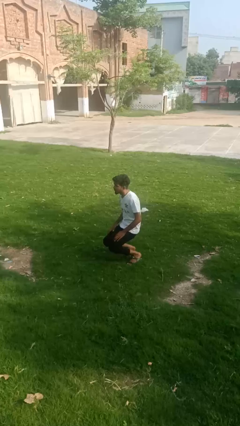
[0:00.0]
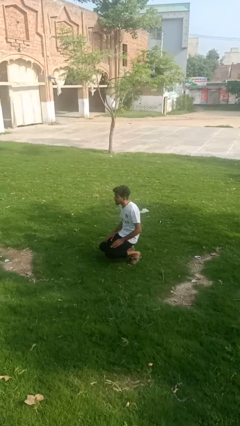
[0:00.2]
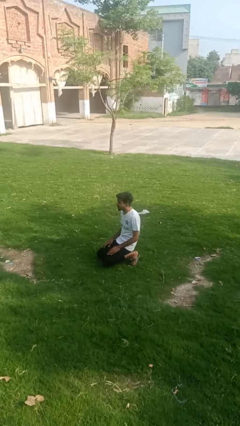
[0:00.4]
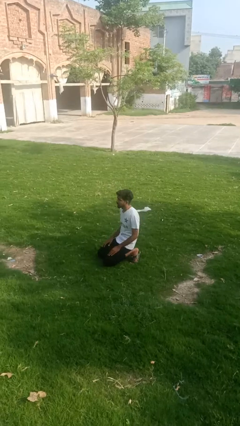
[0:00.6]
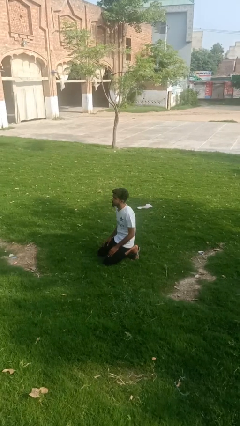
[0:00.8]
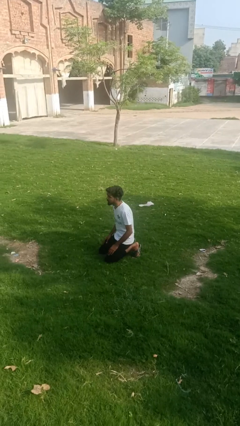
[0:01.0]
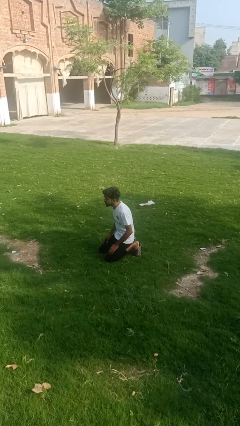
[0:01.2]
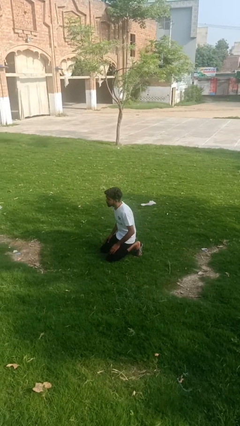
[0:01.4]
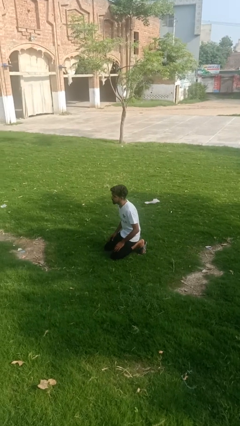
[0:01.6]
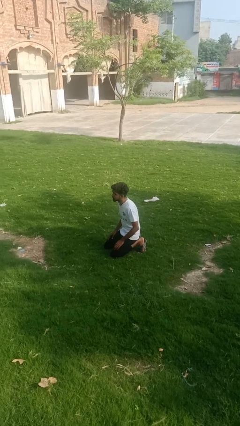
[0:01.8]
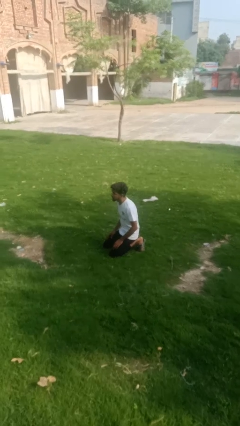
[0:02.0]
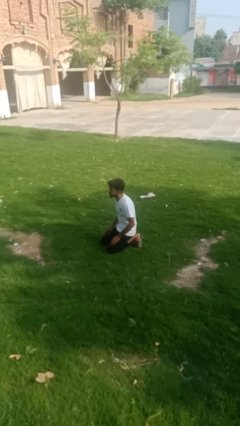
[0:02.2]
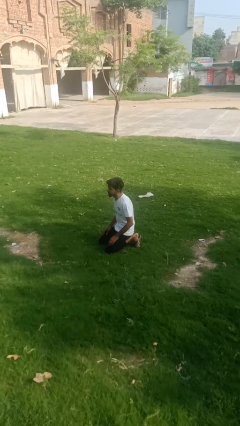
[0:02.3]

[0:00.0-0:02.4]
person kneels

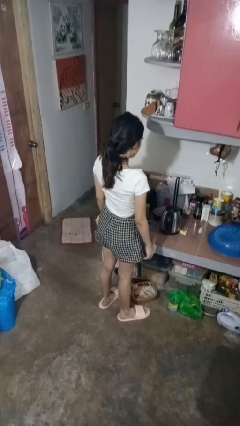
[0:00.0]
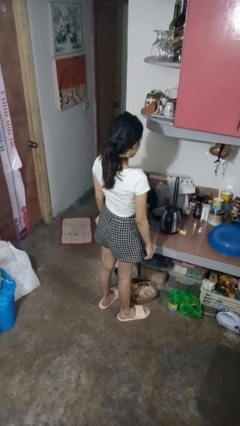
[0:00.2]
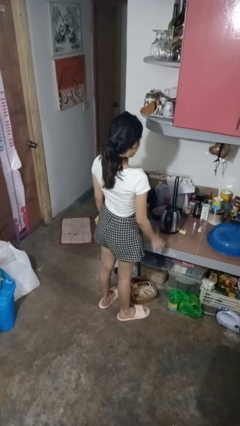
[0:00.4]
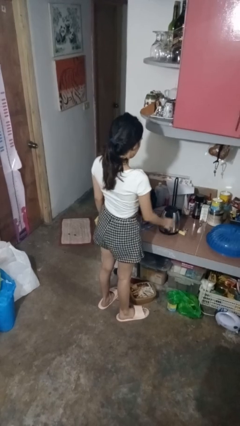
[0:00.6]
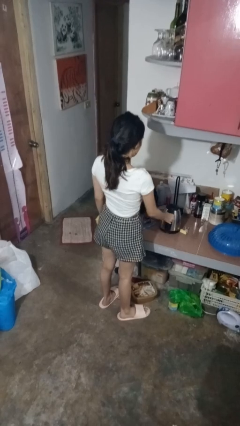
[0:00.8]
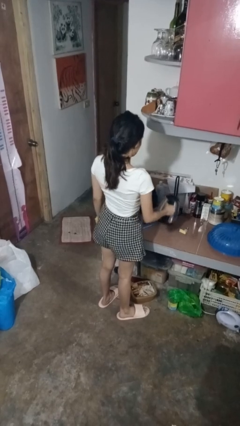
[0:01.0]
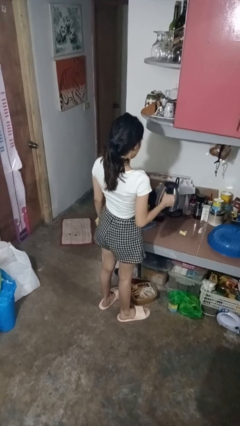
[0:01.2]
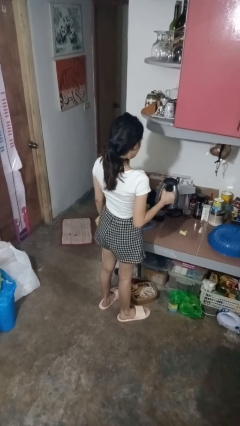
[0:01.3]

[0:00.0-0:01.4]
person picks up object from countertop

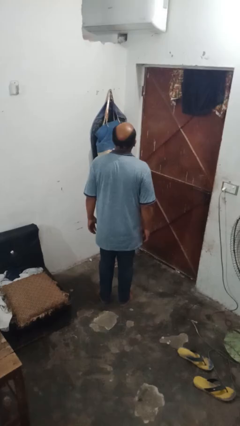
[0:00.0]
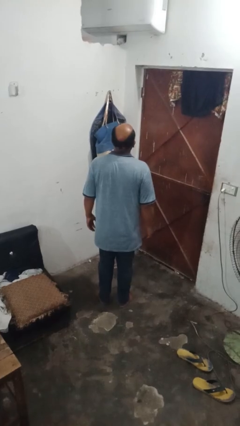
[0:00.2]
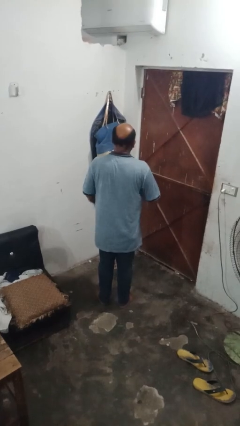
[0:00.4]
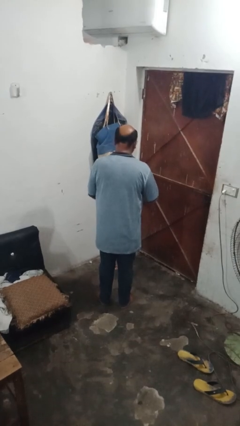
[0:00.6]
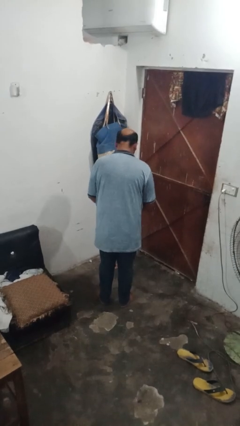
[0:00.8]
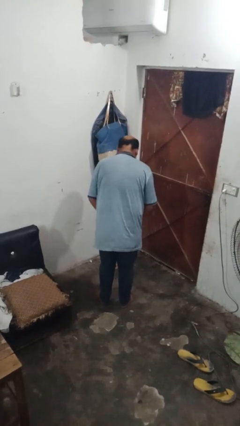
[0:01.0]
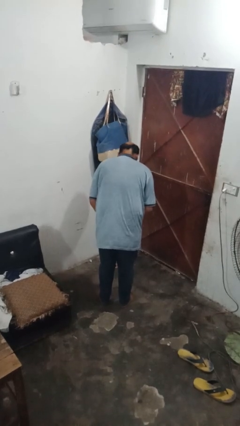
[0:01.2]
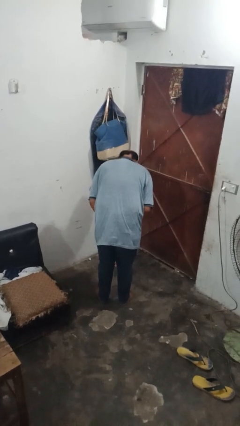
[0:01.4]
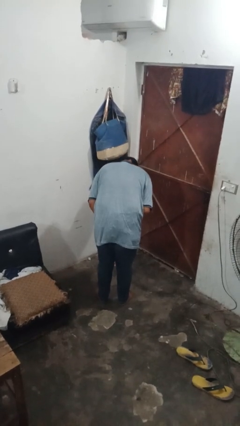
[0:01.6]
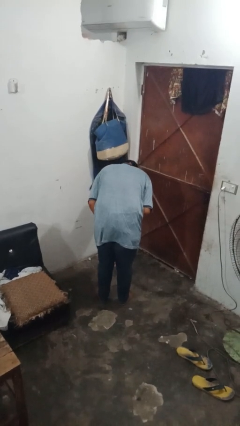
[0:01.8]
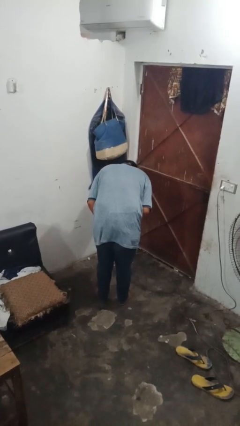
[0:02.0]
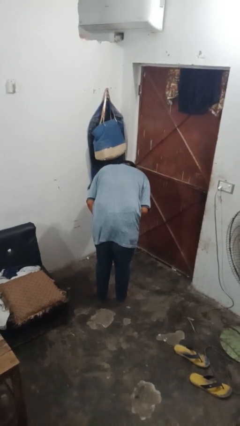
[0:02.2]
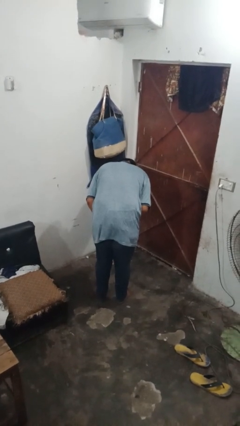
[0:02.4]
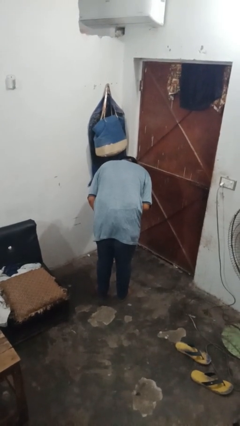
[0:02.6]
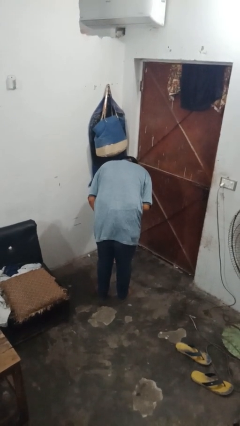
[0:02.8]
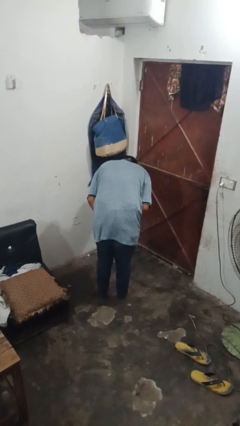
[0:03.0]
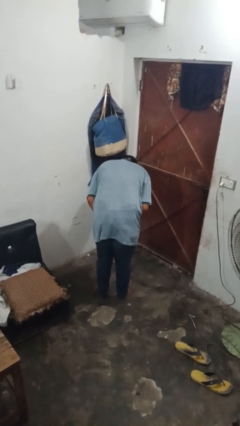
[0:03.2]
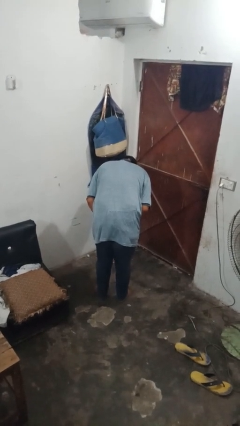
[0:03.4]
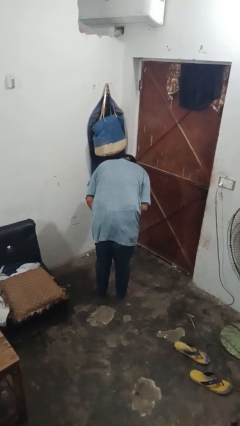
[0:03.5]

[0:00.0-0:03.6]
person bows

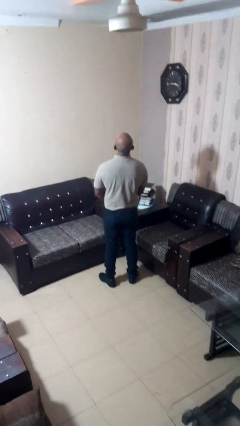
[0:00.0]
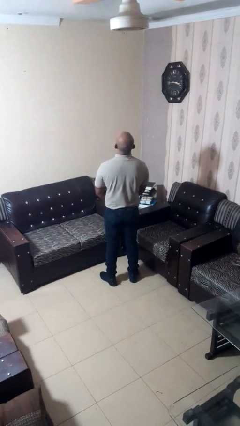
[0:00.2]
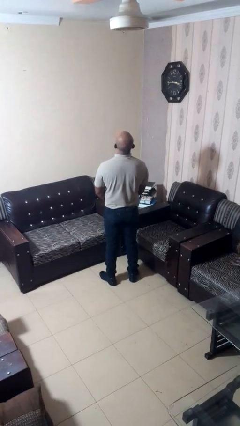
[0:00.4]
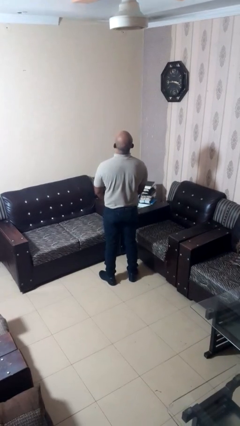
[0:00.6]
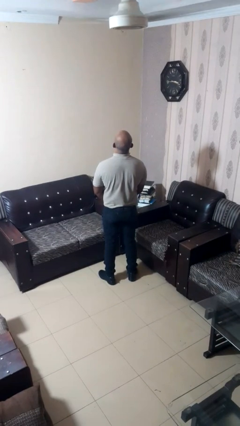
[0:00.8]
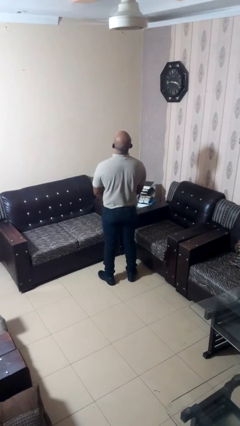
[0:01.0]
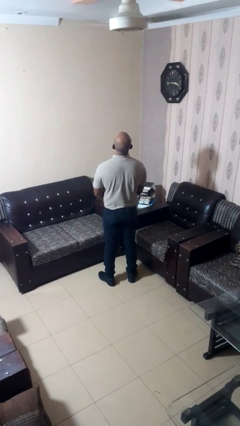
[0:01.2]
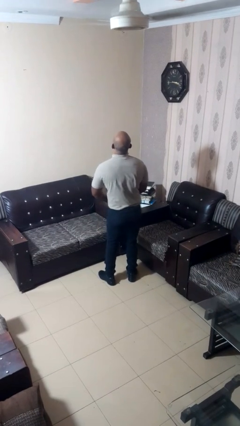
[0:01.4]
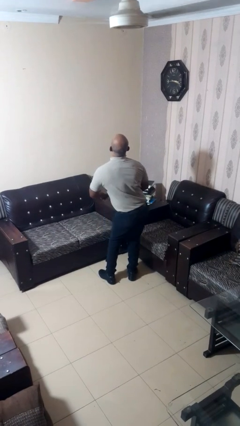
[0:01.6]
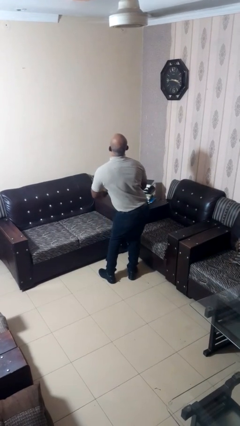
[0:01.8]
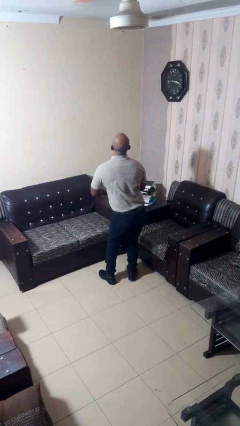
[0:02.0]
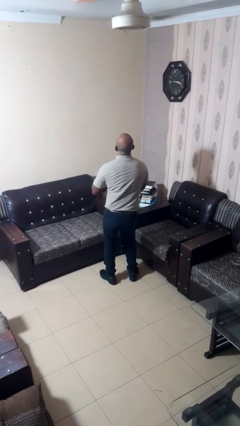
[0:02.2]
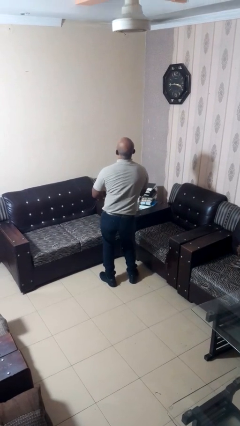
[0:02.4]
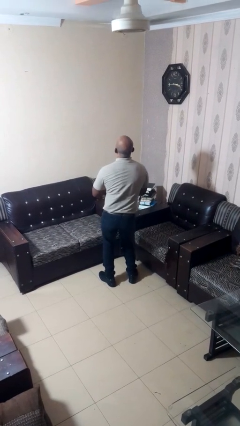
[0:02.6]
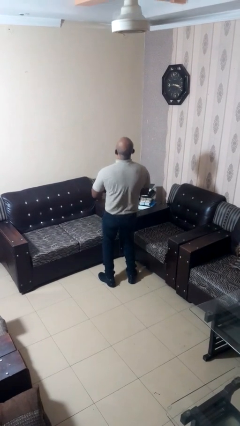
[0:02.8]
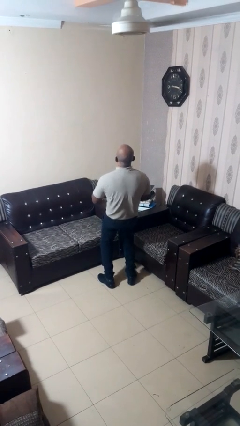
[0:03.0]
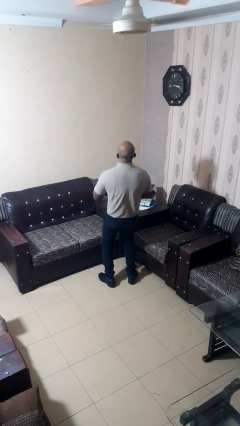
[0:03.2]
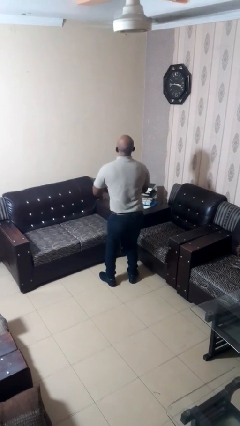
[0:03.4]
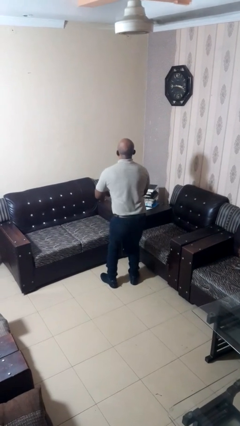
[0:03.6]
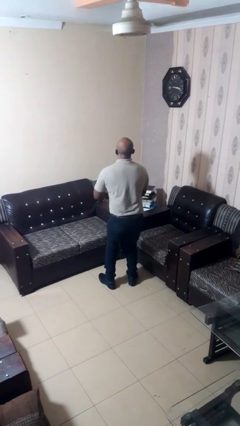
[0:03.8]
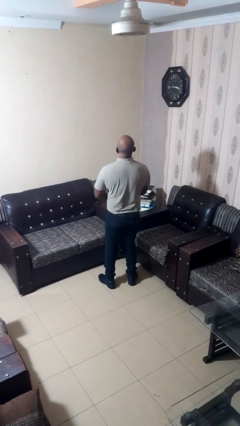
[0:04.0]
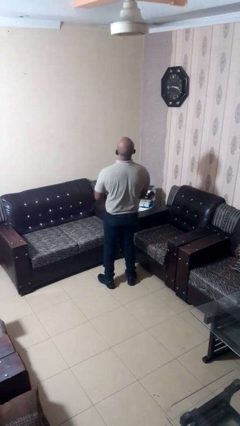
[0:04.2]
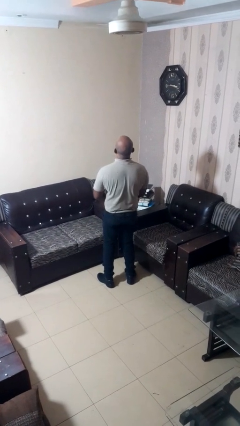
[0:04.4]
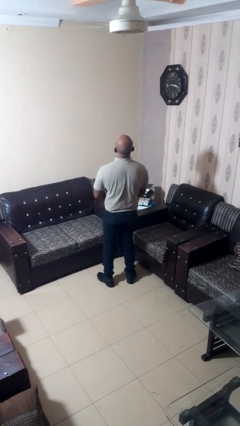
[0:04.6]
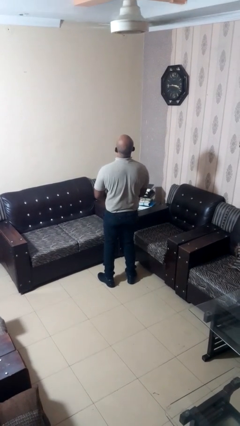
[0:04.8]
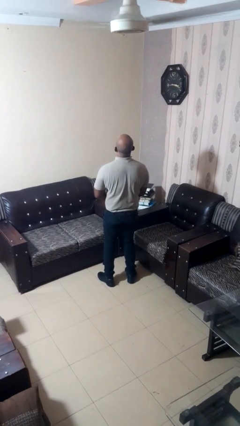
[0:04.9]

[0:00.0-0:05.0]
person wiggles hips

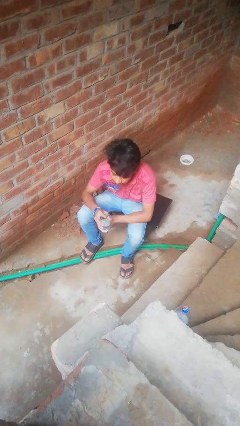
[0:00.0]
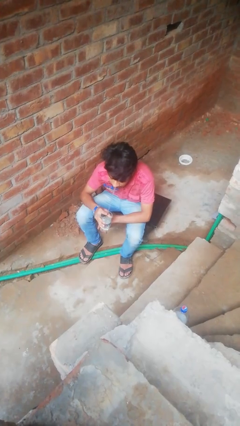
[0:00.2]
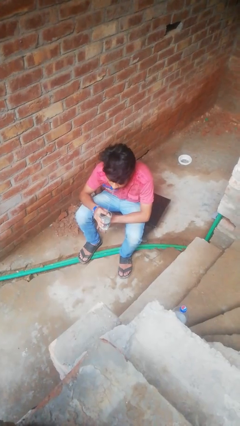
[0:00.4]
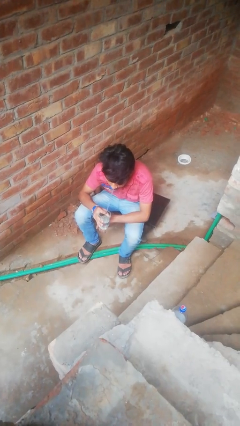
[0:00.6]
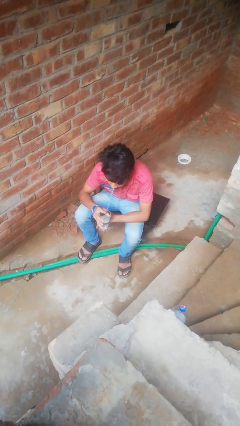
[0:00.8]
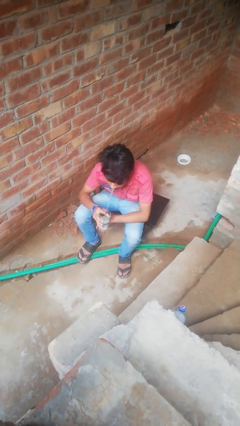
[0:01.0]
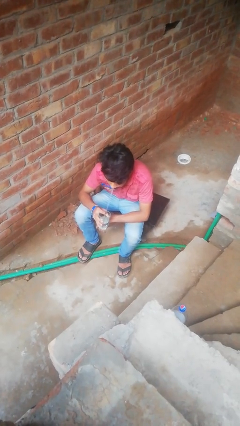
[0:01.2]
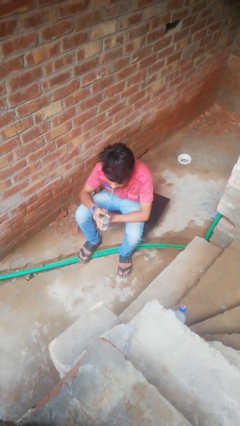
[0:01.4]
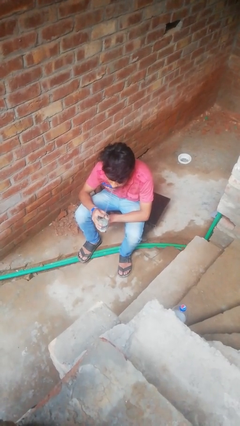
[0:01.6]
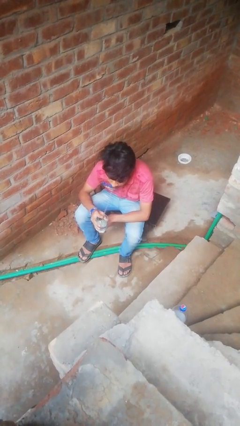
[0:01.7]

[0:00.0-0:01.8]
person drinks from straw

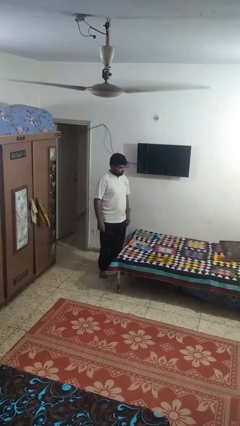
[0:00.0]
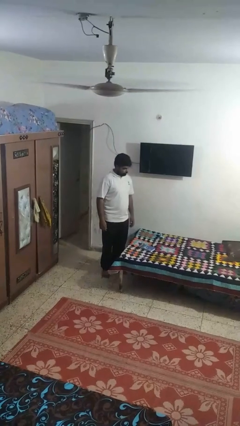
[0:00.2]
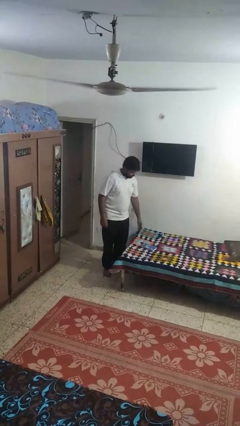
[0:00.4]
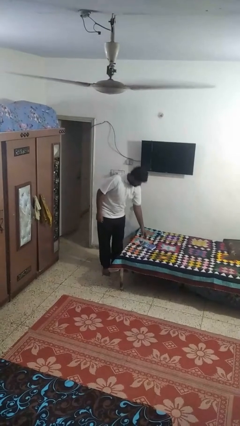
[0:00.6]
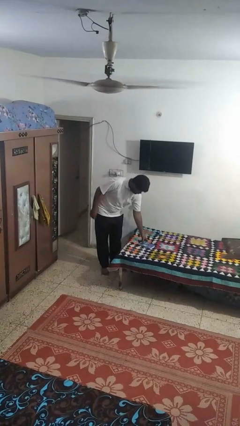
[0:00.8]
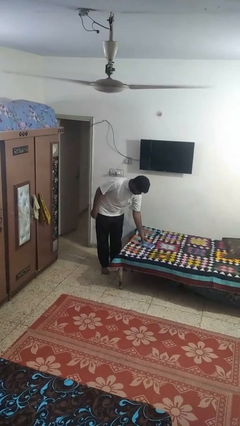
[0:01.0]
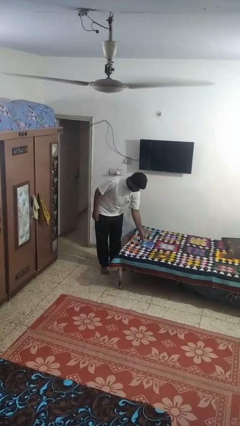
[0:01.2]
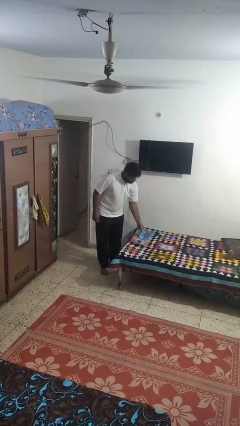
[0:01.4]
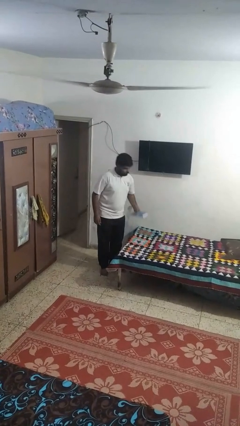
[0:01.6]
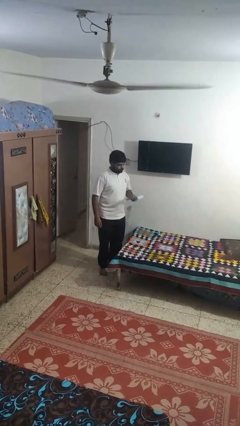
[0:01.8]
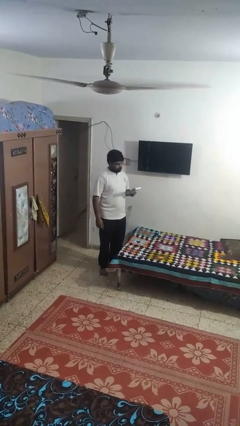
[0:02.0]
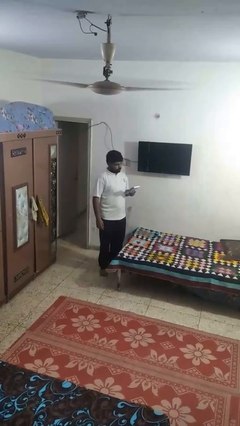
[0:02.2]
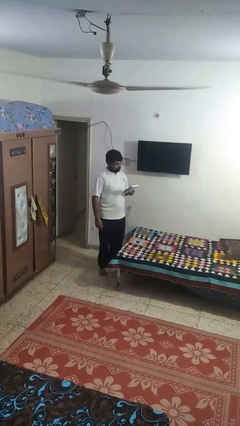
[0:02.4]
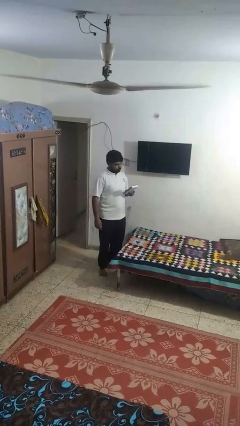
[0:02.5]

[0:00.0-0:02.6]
person picks up object from bed

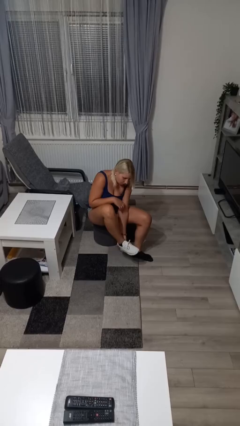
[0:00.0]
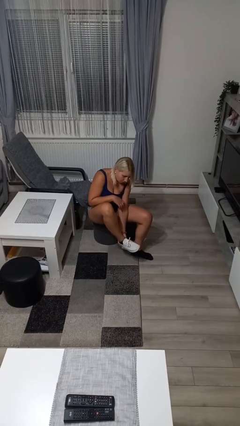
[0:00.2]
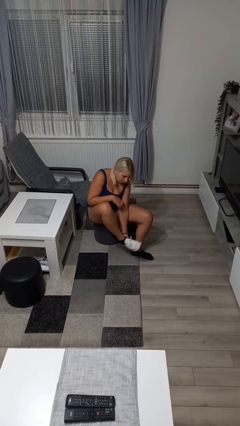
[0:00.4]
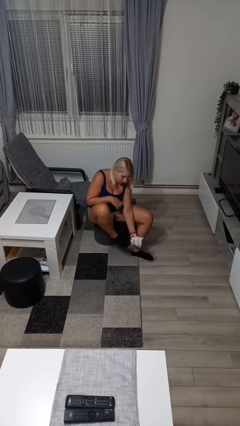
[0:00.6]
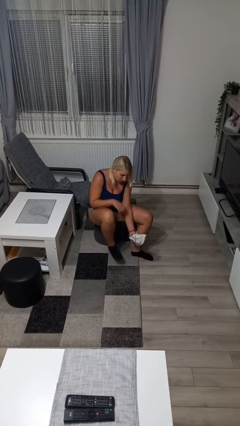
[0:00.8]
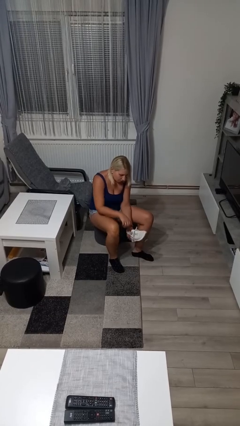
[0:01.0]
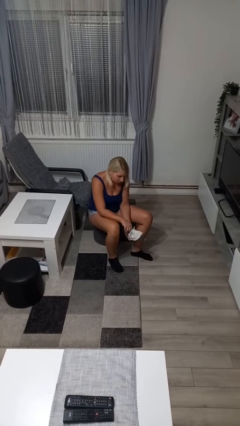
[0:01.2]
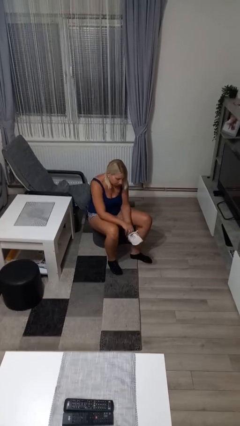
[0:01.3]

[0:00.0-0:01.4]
person takes off shoes
